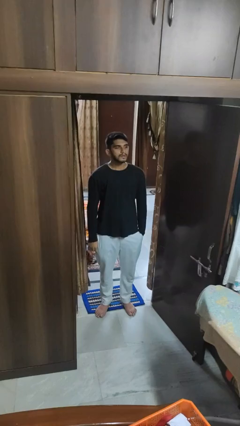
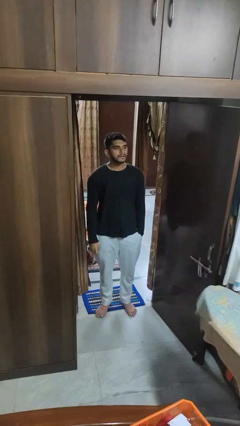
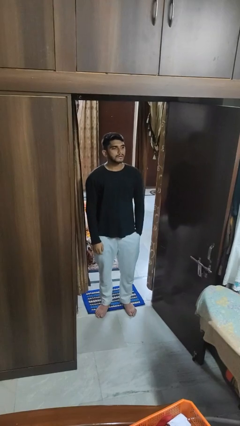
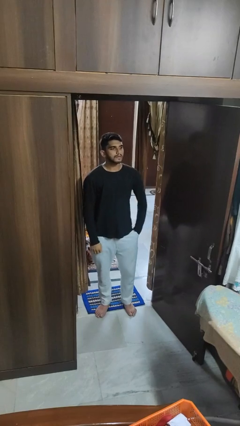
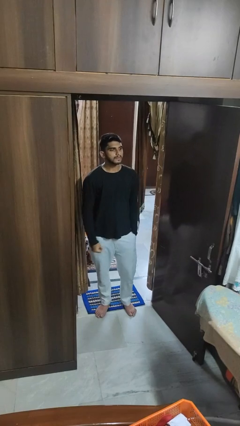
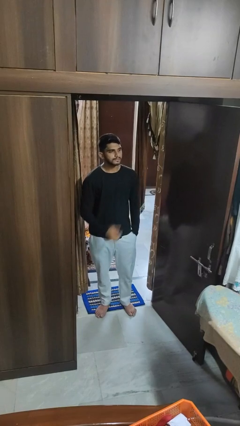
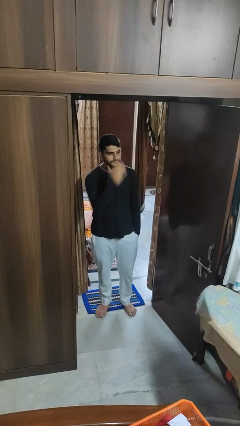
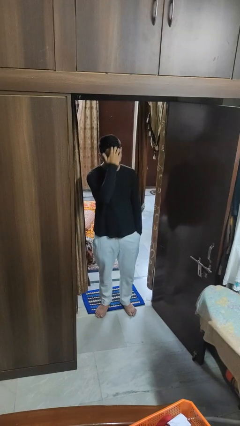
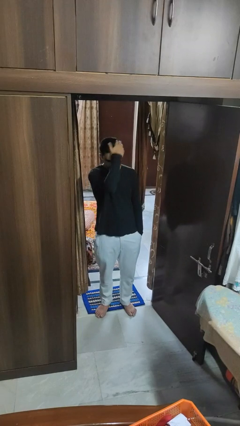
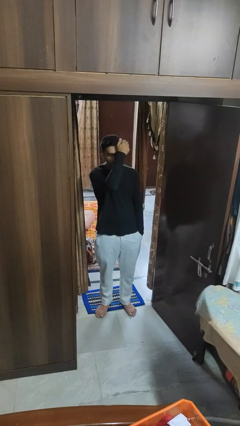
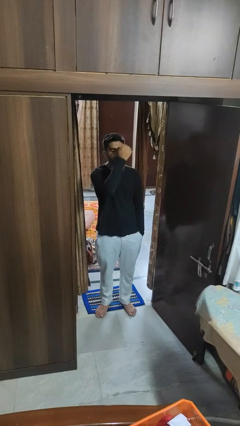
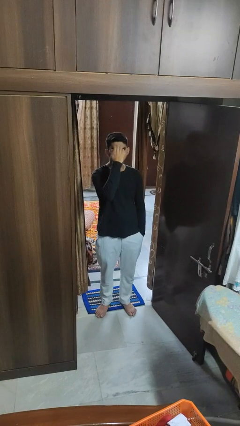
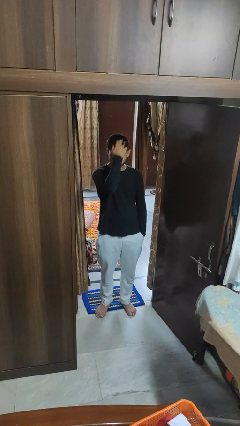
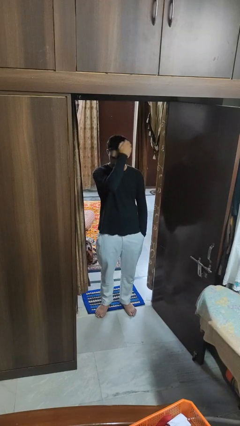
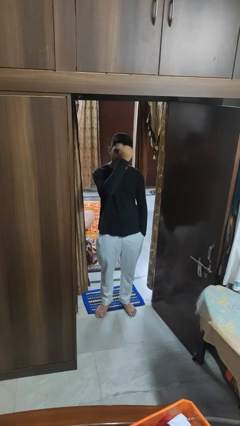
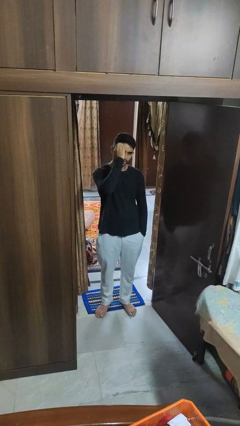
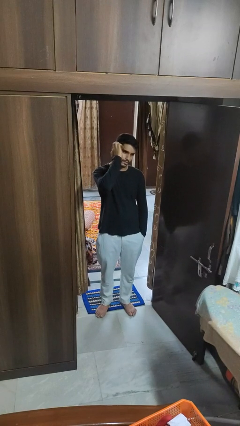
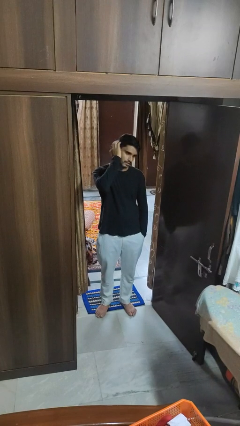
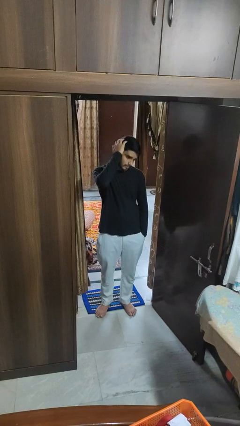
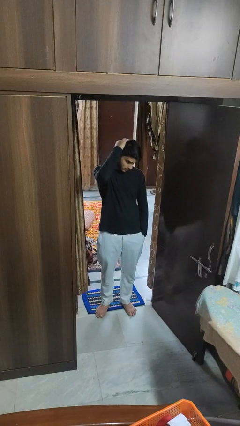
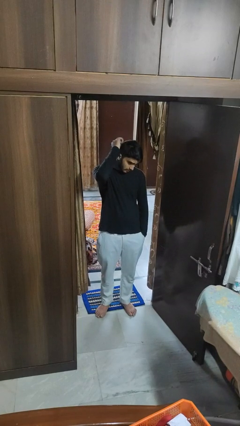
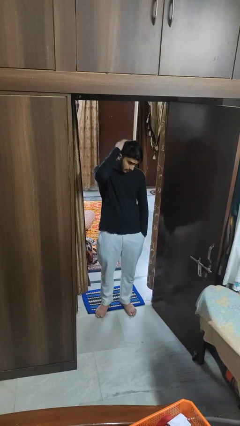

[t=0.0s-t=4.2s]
person strokes hair

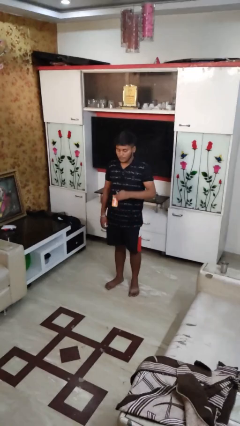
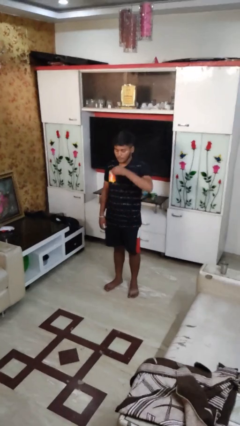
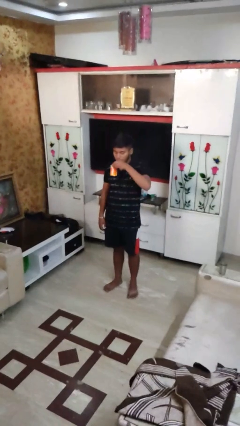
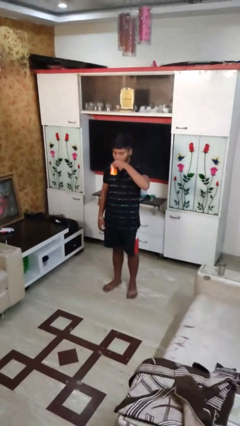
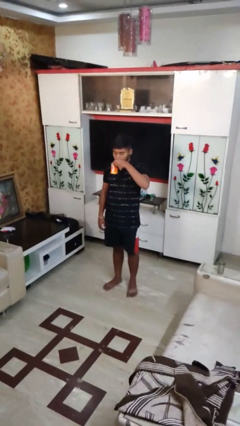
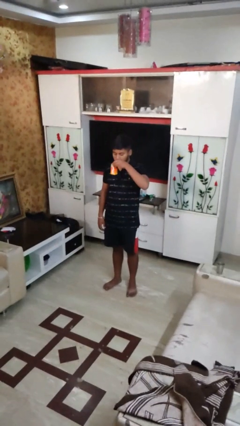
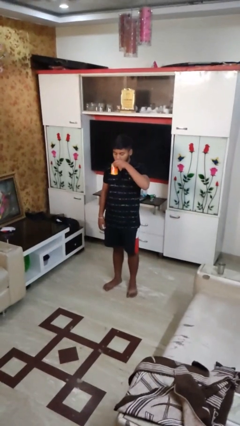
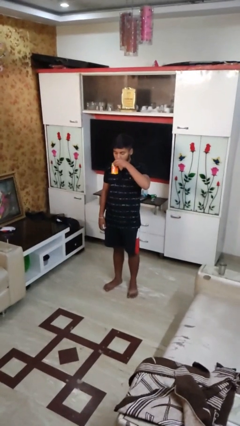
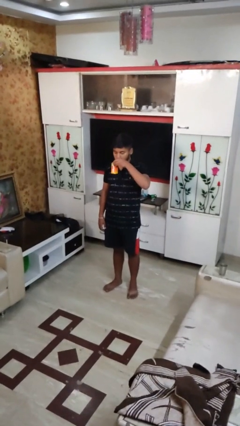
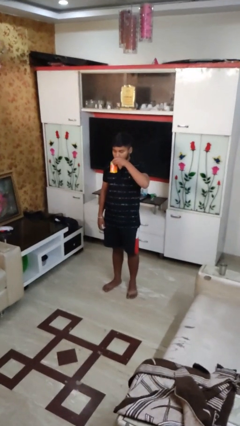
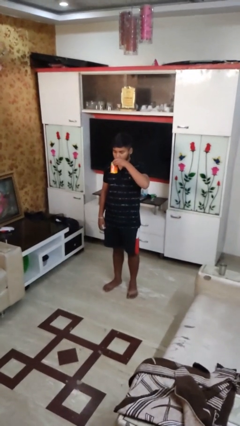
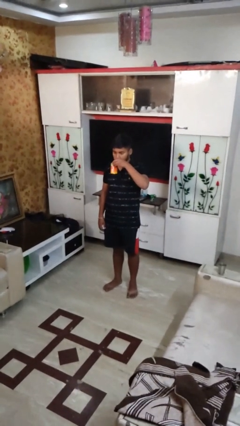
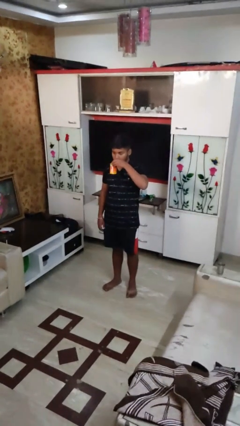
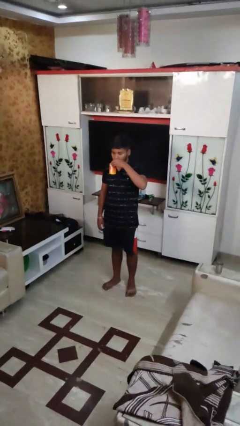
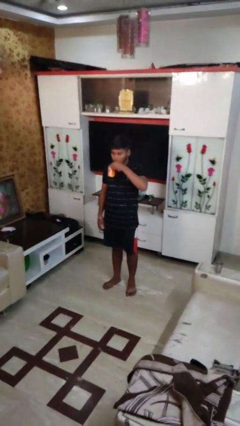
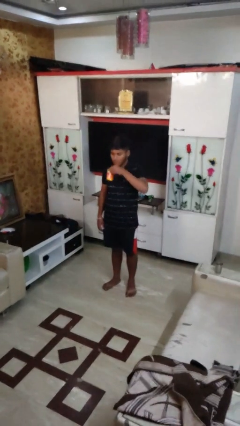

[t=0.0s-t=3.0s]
person drinks from straw

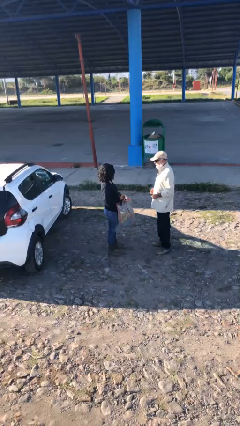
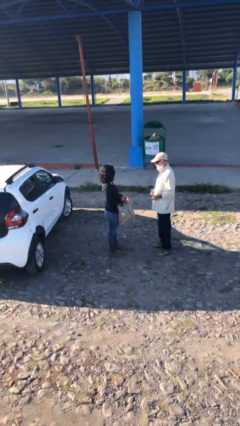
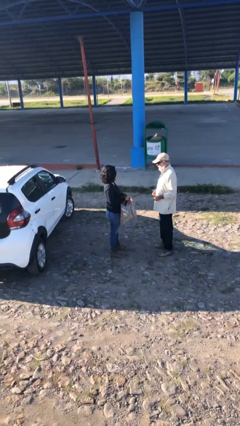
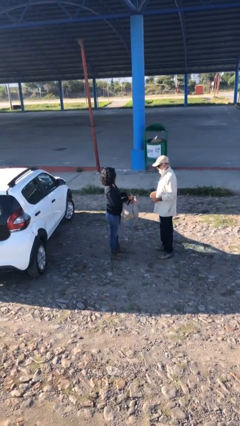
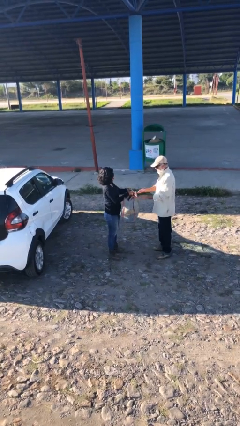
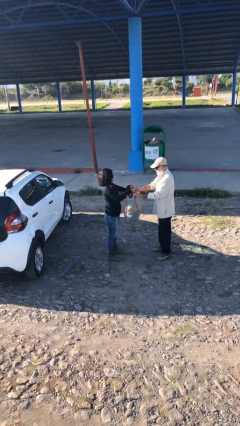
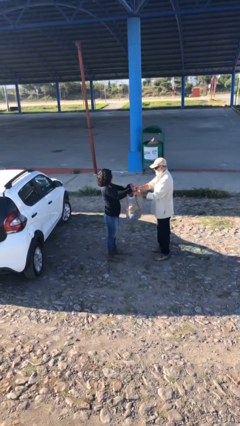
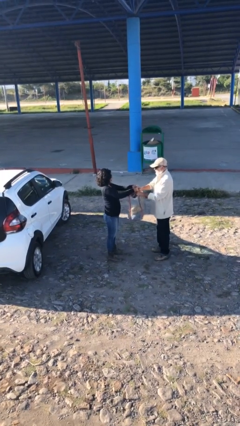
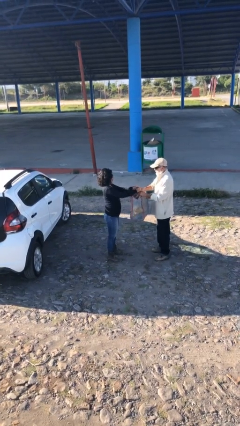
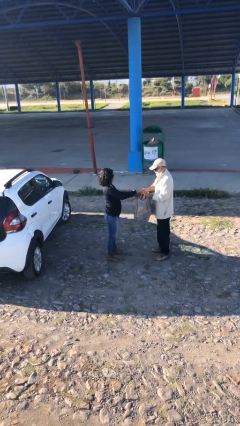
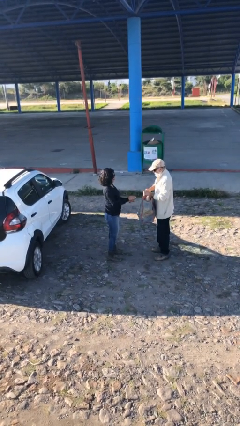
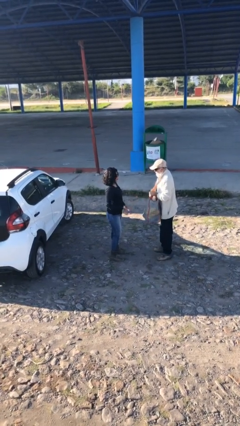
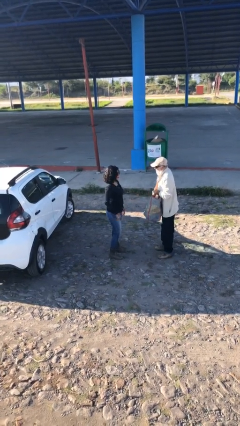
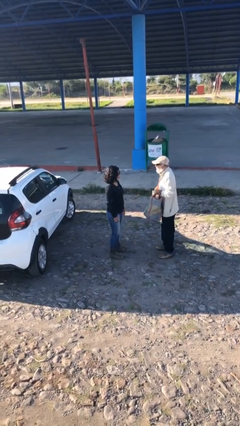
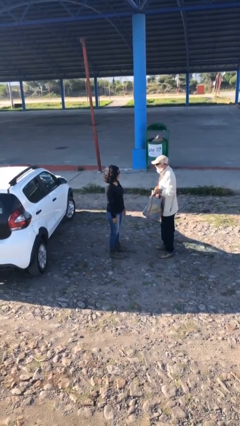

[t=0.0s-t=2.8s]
person transfers object to person

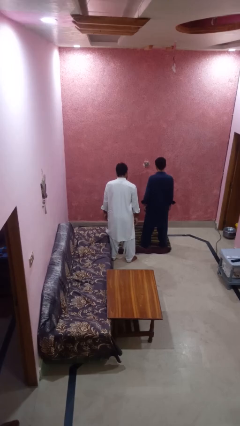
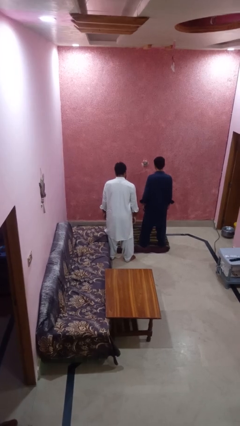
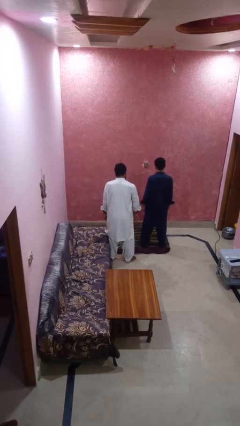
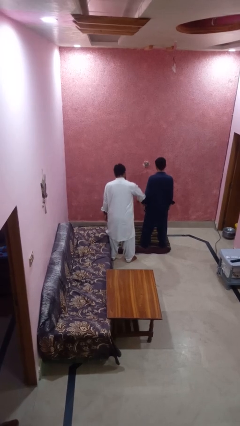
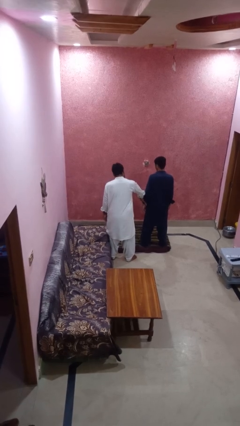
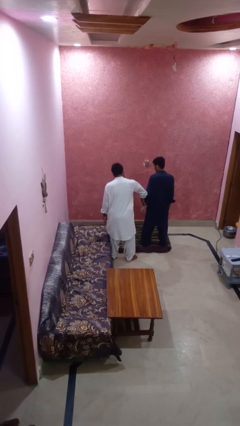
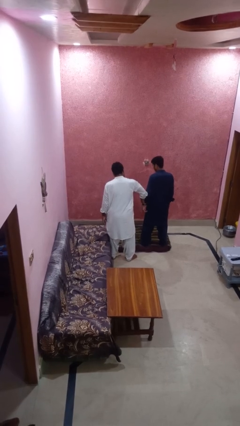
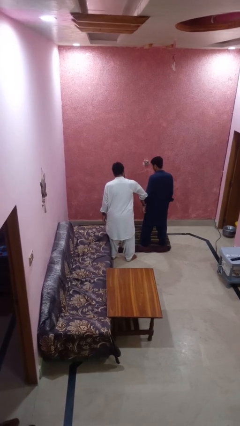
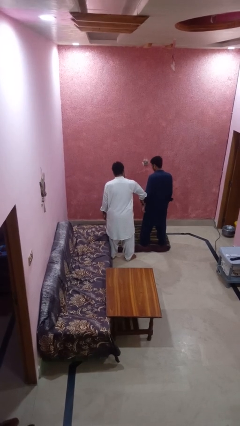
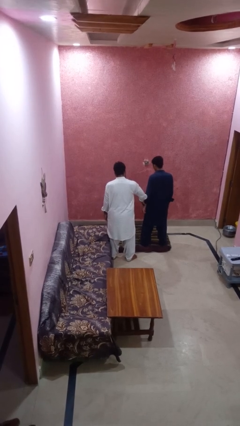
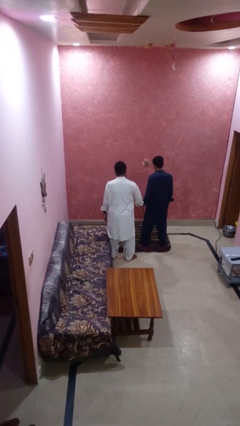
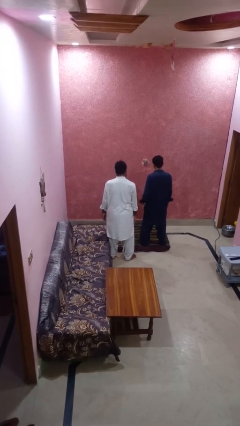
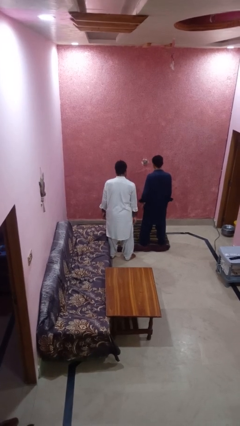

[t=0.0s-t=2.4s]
person grabs person by bicep

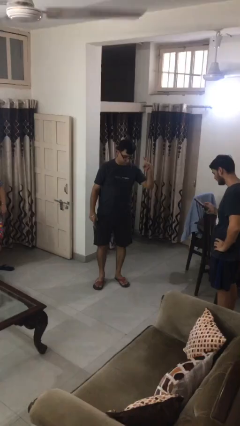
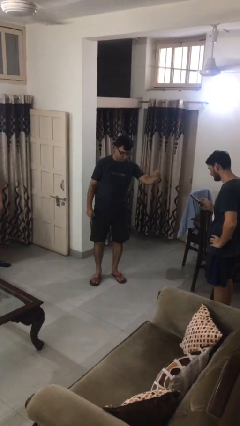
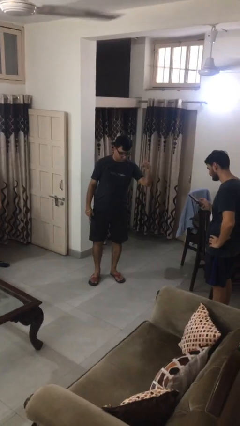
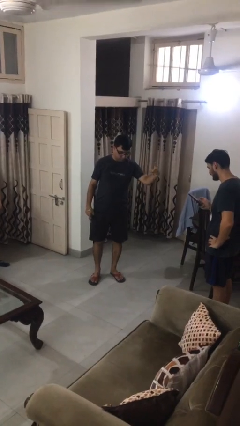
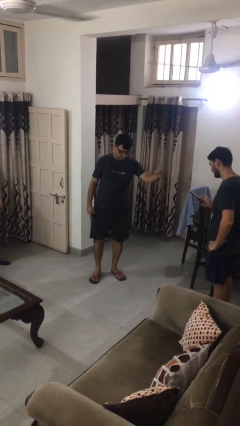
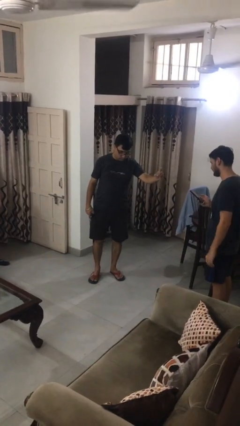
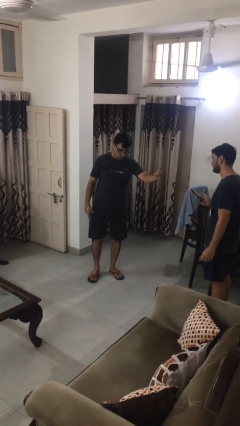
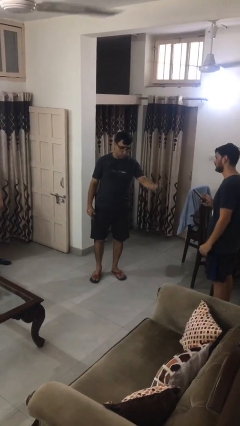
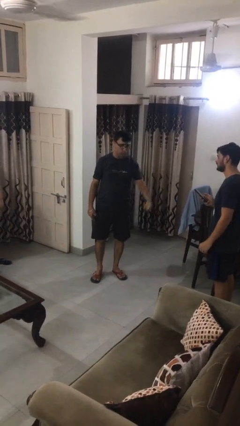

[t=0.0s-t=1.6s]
person points at person

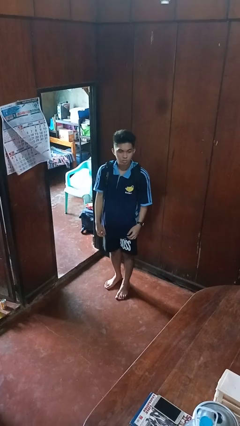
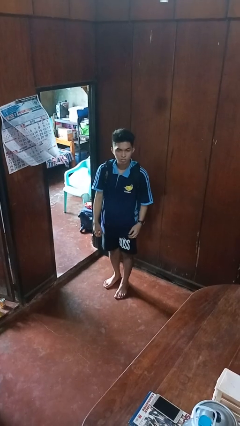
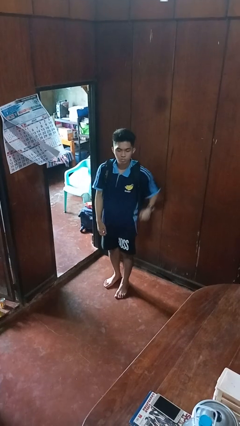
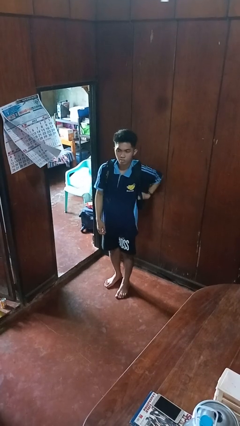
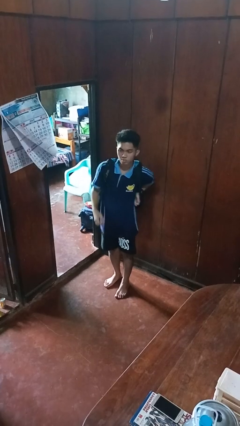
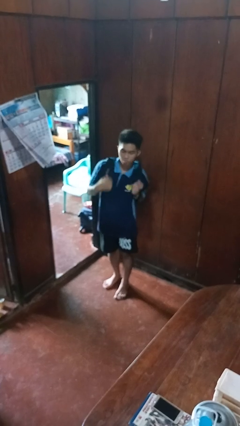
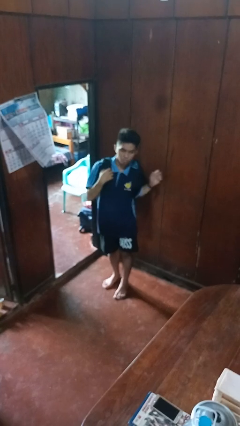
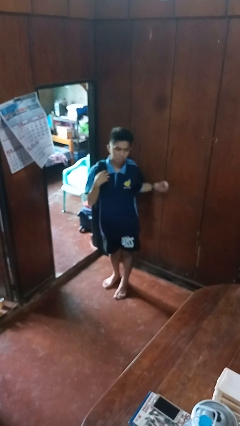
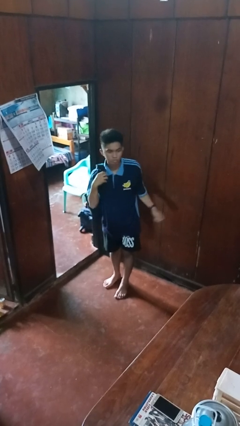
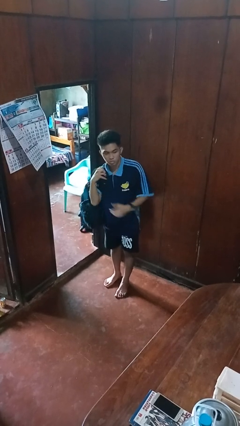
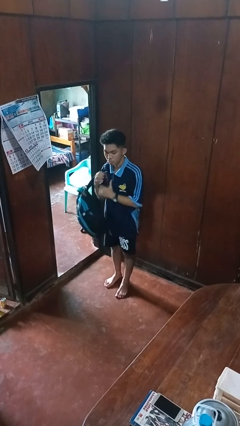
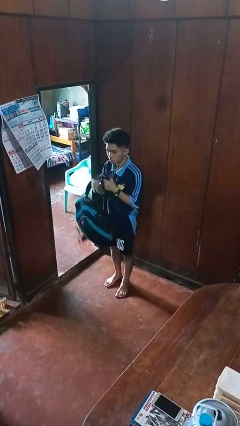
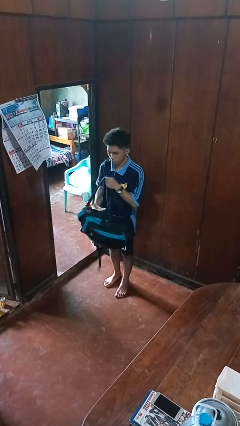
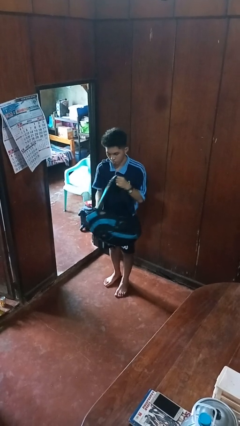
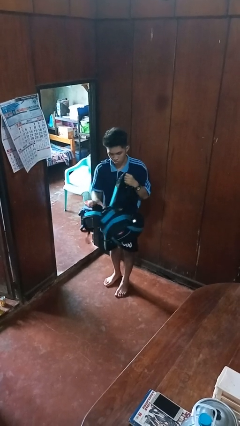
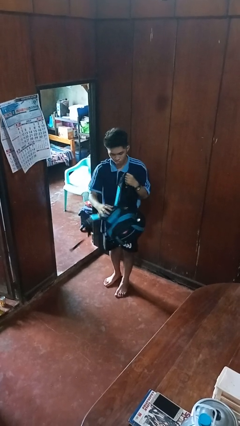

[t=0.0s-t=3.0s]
person takes off backpack

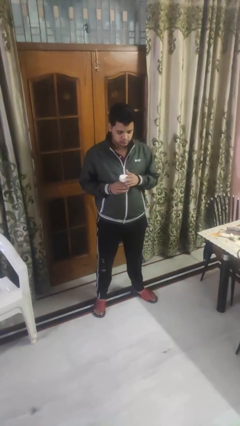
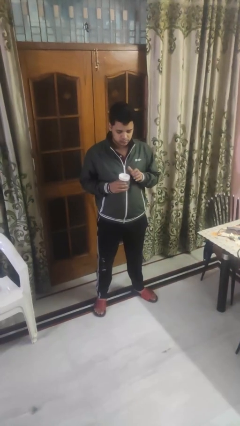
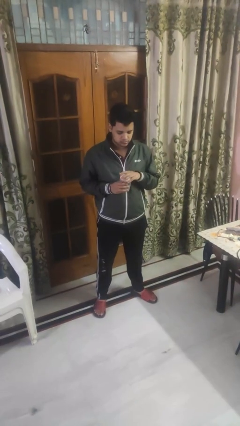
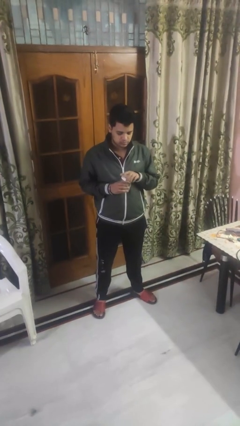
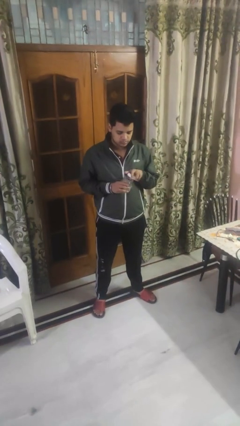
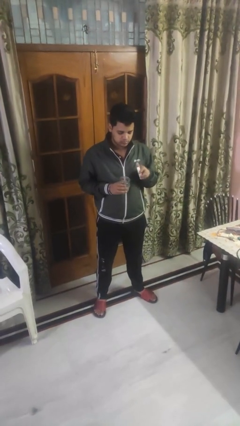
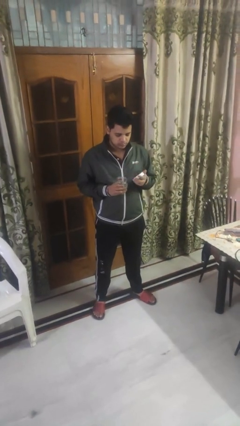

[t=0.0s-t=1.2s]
person opens jar
